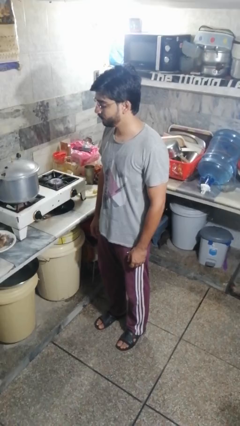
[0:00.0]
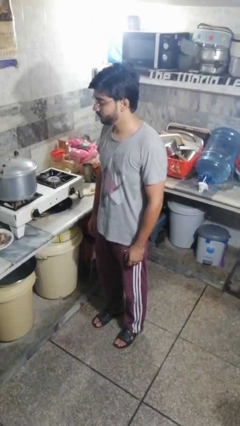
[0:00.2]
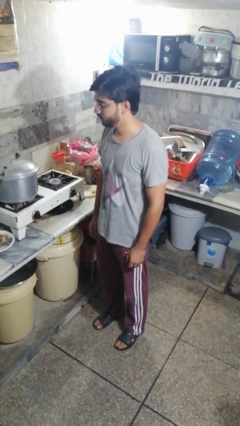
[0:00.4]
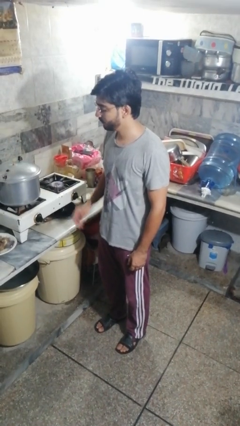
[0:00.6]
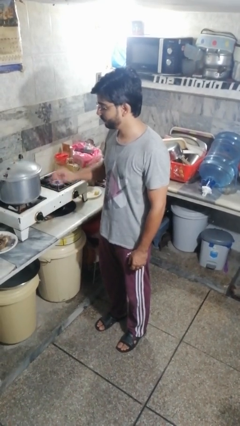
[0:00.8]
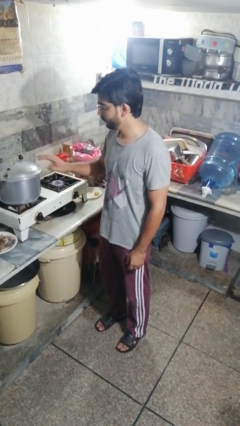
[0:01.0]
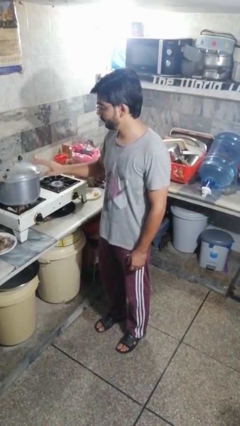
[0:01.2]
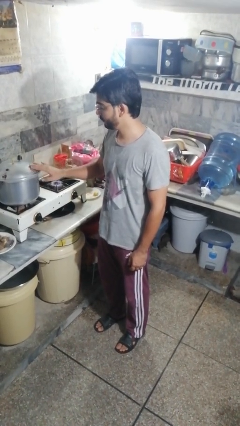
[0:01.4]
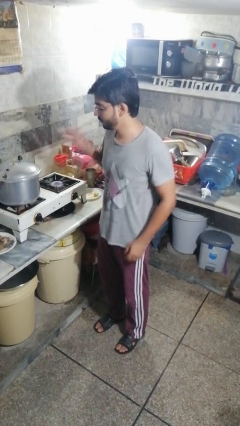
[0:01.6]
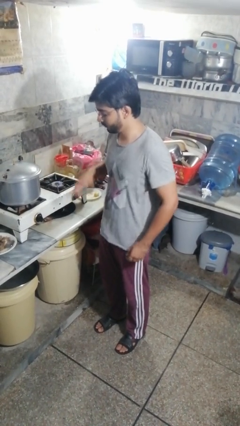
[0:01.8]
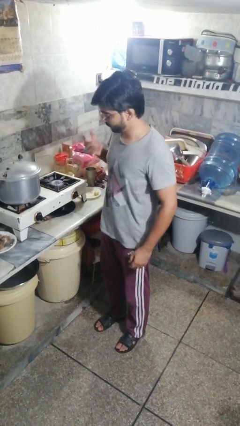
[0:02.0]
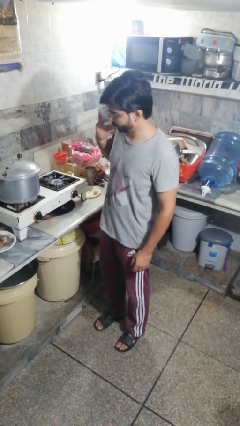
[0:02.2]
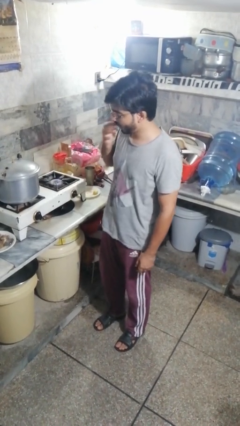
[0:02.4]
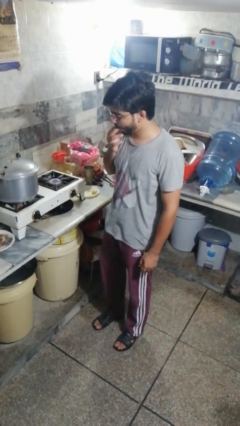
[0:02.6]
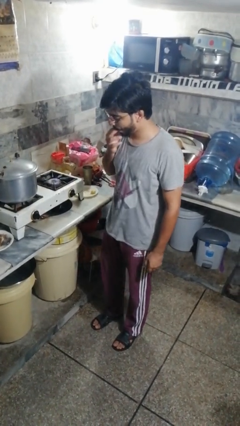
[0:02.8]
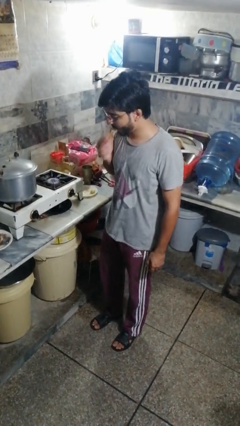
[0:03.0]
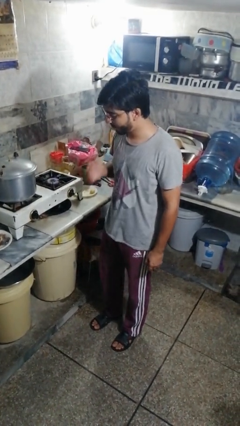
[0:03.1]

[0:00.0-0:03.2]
person burns hand

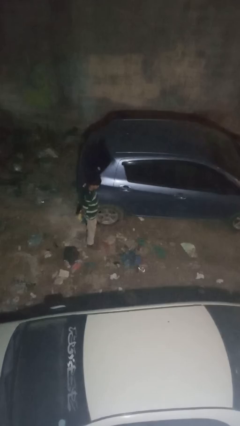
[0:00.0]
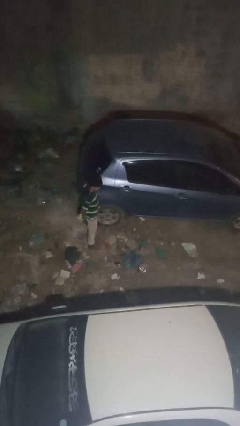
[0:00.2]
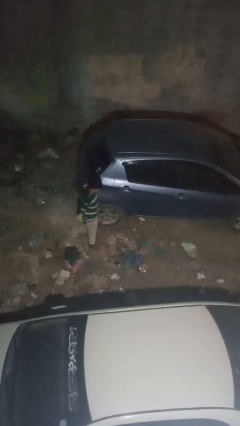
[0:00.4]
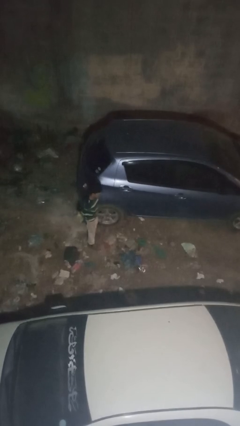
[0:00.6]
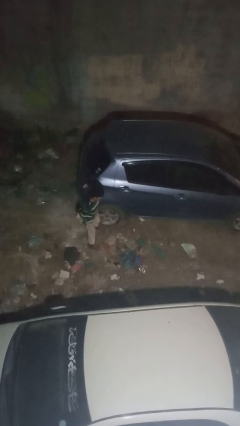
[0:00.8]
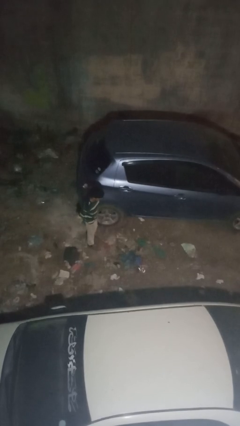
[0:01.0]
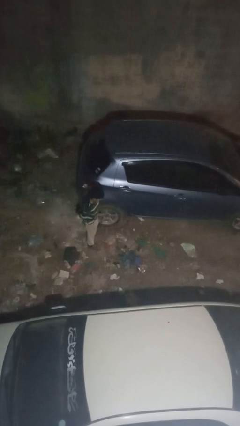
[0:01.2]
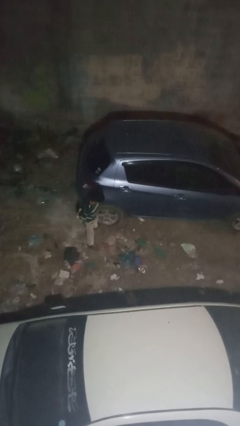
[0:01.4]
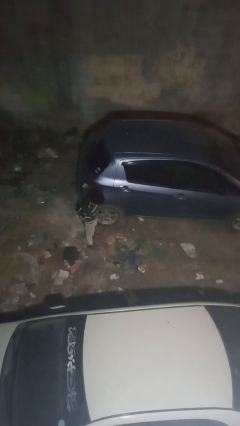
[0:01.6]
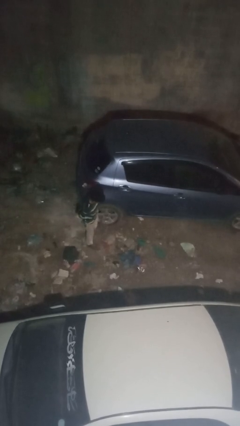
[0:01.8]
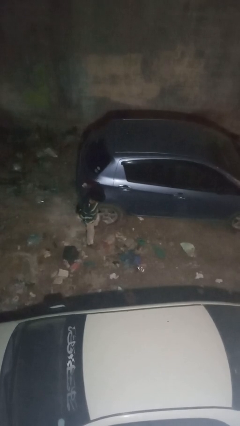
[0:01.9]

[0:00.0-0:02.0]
person kicks car tires

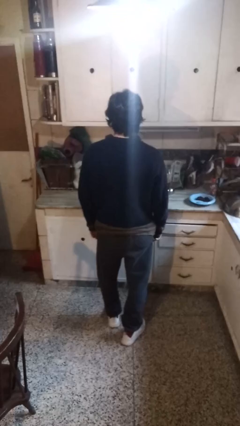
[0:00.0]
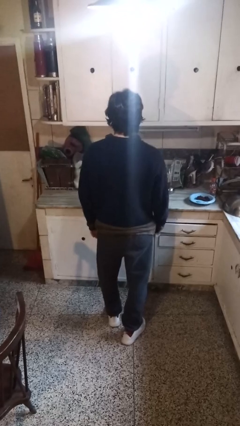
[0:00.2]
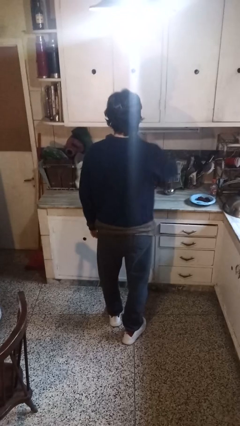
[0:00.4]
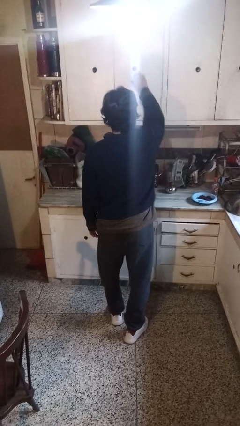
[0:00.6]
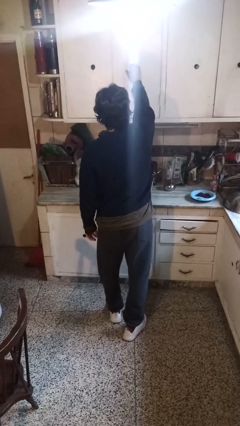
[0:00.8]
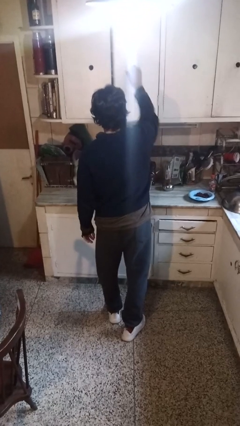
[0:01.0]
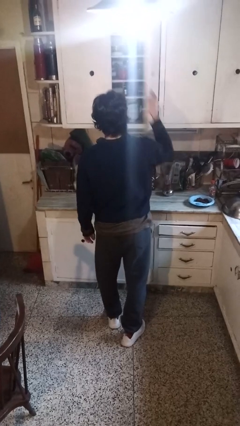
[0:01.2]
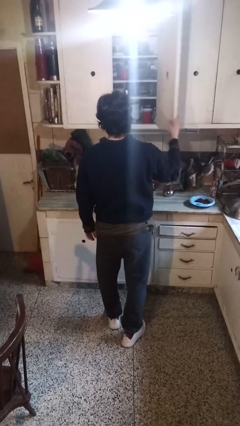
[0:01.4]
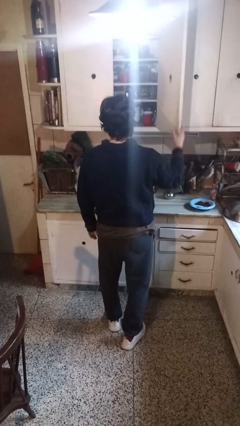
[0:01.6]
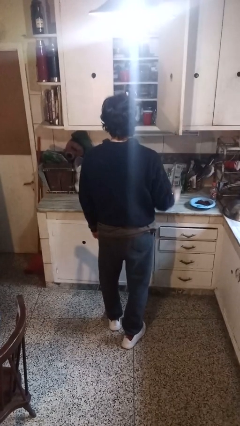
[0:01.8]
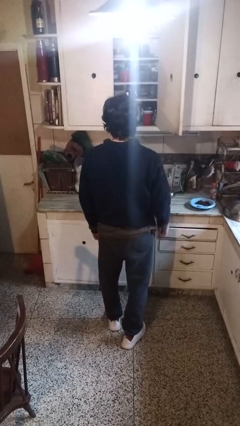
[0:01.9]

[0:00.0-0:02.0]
person opens cabinet

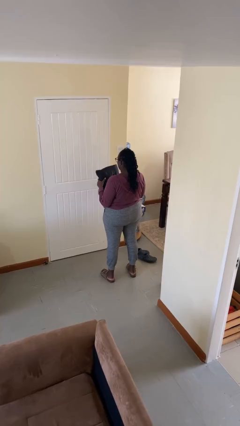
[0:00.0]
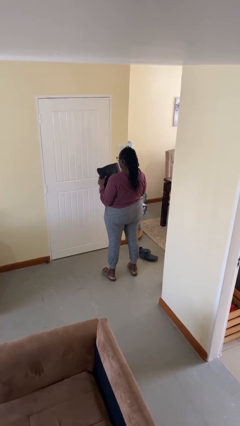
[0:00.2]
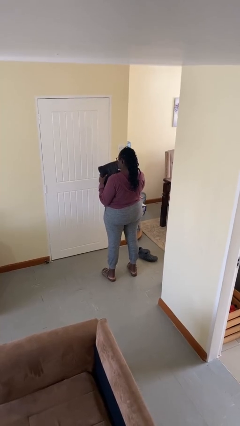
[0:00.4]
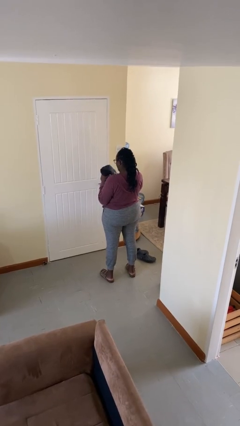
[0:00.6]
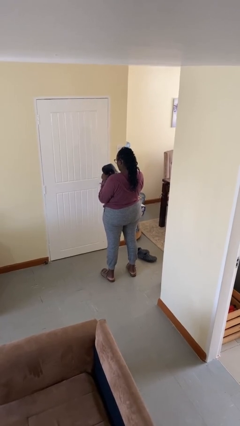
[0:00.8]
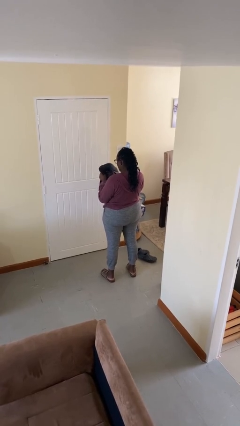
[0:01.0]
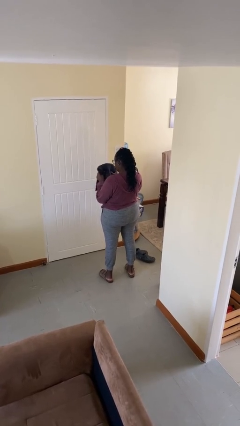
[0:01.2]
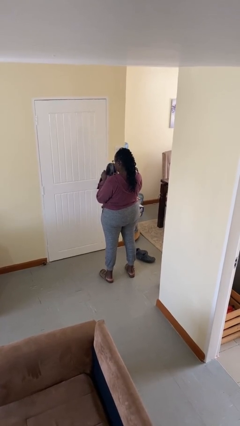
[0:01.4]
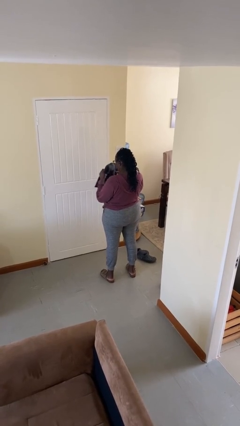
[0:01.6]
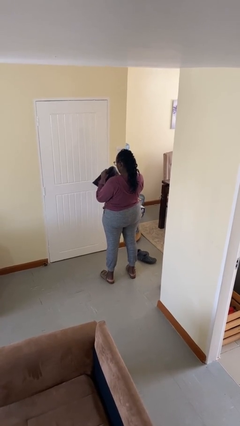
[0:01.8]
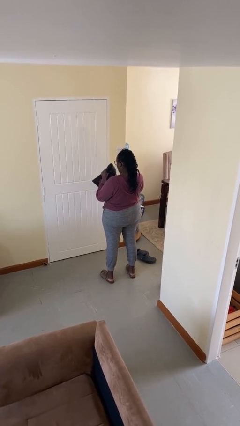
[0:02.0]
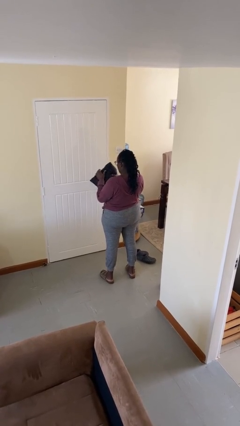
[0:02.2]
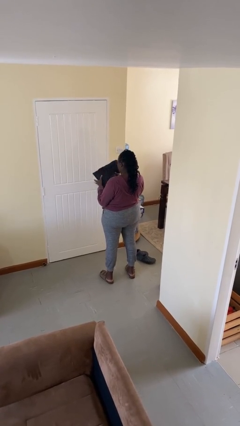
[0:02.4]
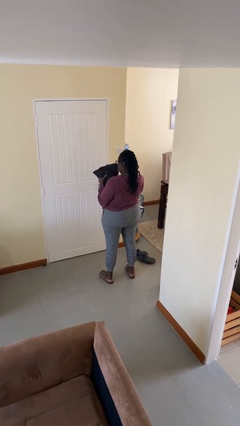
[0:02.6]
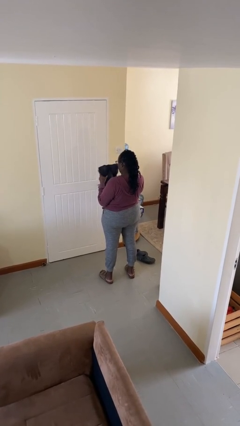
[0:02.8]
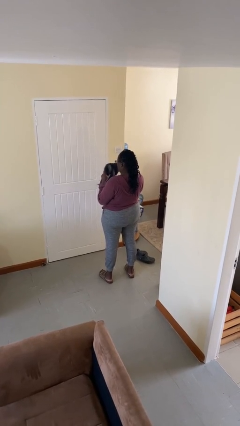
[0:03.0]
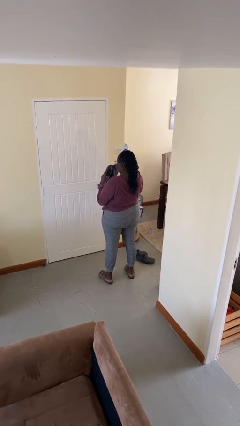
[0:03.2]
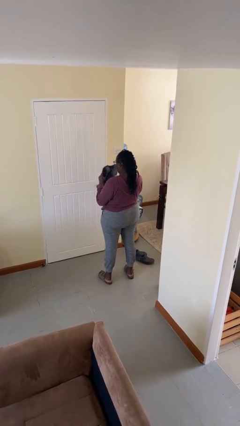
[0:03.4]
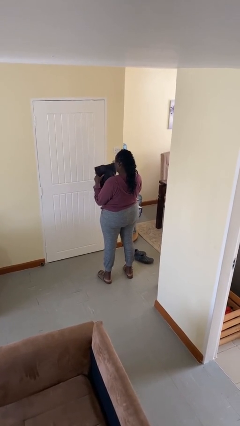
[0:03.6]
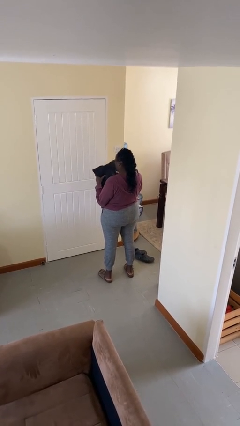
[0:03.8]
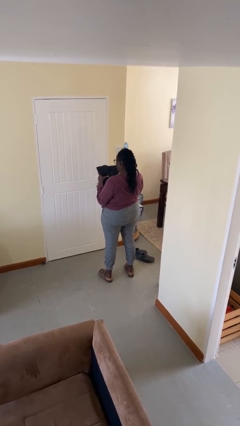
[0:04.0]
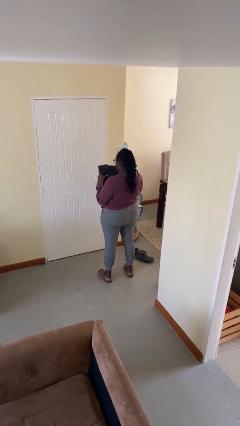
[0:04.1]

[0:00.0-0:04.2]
person squeezes object

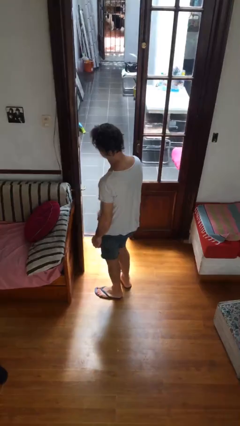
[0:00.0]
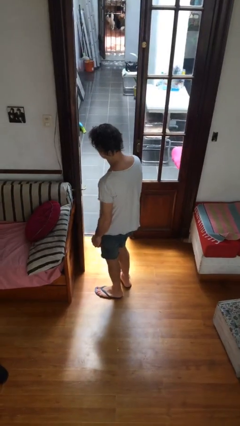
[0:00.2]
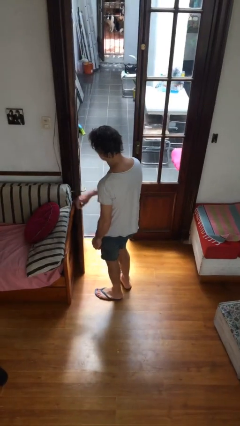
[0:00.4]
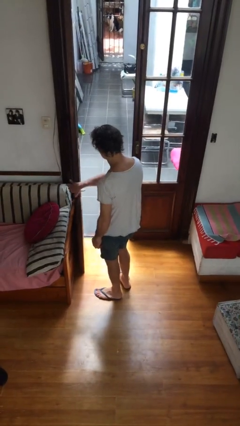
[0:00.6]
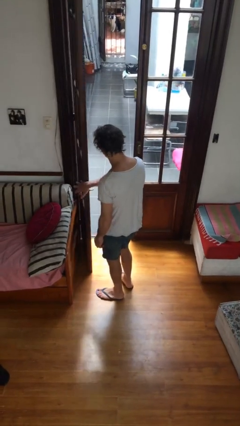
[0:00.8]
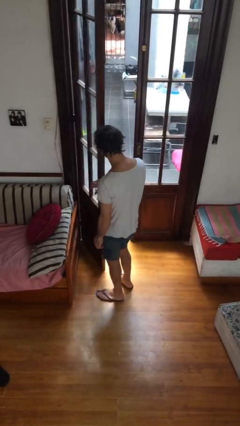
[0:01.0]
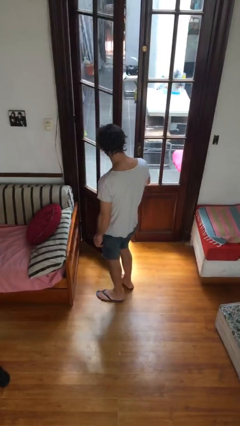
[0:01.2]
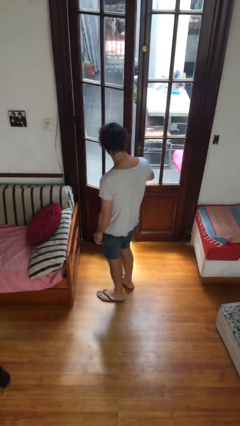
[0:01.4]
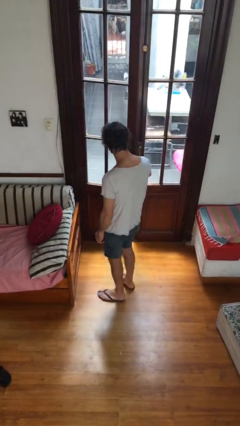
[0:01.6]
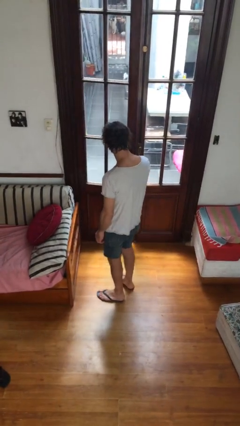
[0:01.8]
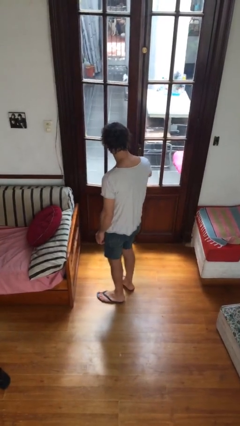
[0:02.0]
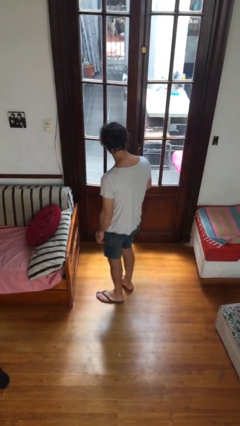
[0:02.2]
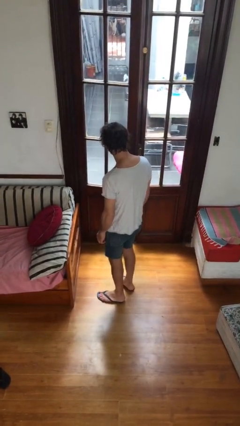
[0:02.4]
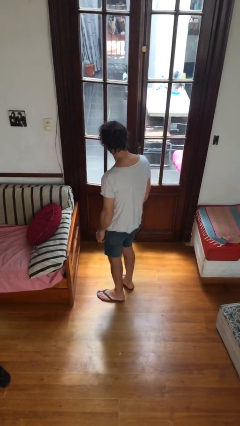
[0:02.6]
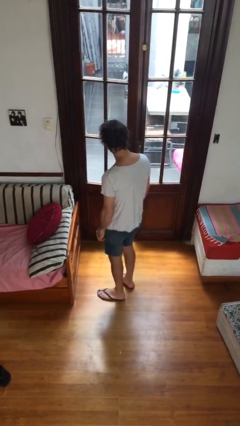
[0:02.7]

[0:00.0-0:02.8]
person closes facility door

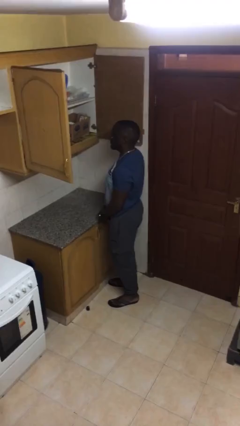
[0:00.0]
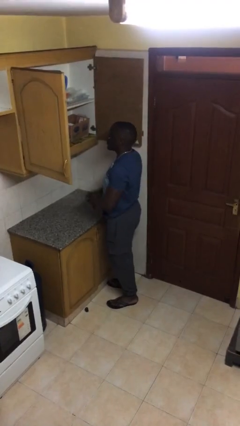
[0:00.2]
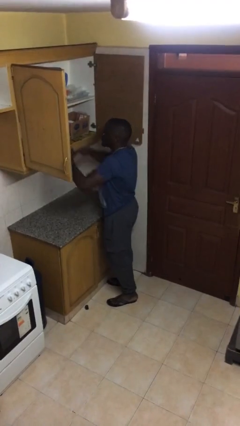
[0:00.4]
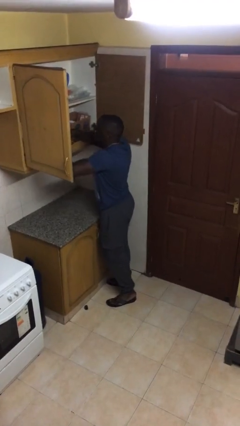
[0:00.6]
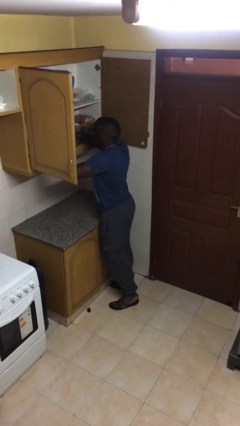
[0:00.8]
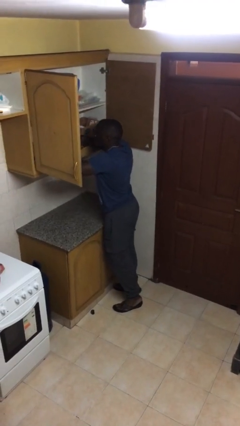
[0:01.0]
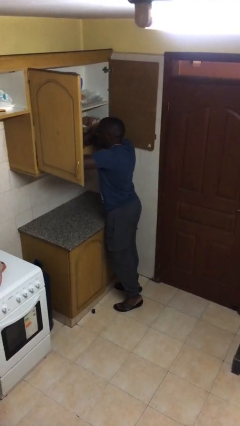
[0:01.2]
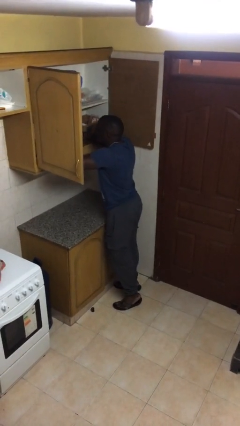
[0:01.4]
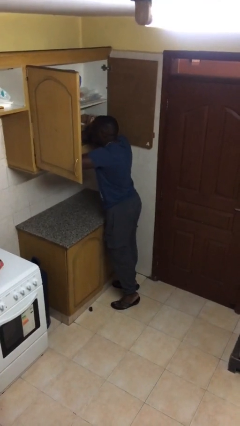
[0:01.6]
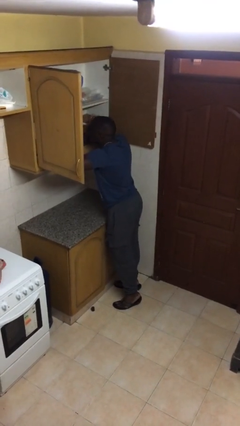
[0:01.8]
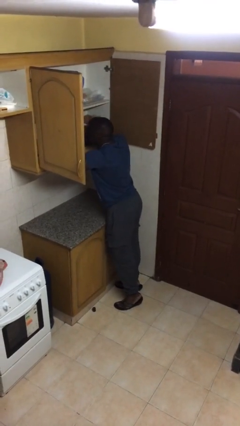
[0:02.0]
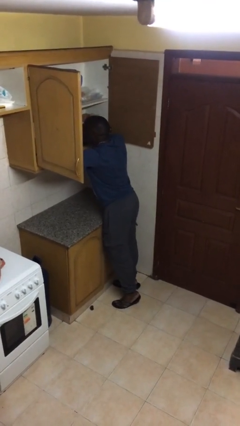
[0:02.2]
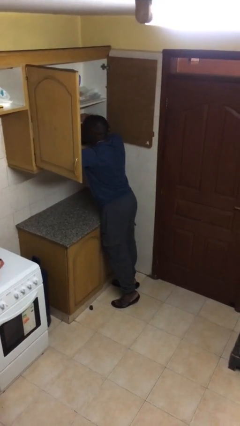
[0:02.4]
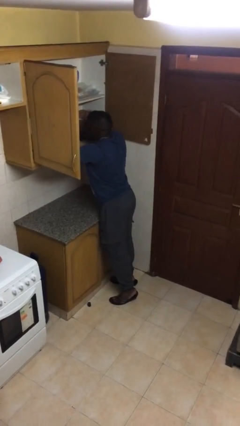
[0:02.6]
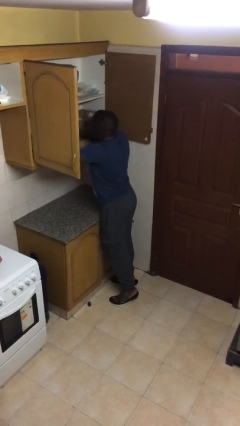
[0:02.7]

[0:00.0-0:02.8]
person searches in cabinet

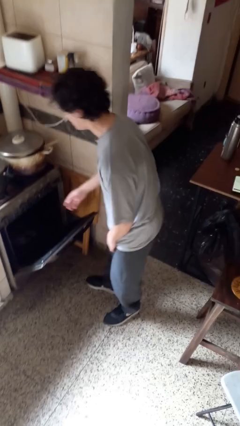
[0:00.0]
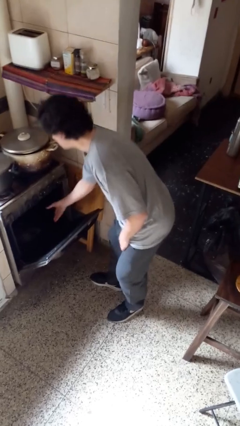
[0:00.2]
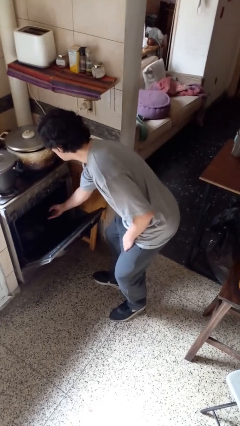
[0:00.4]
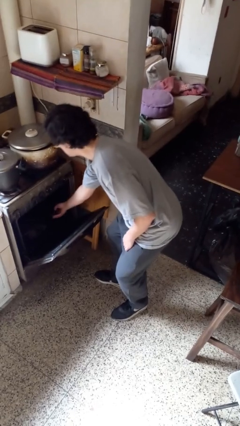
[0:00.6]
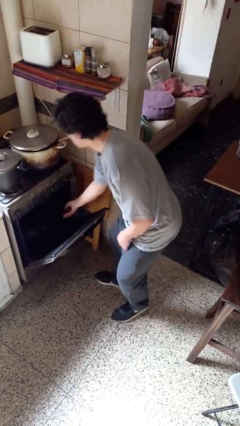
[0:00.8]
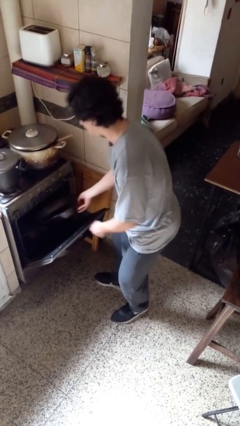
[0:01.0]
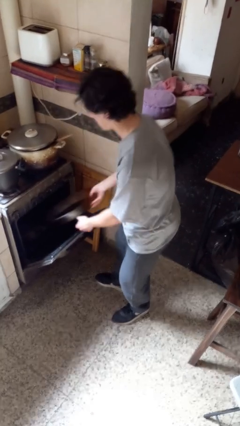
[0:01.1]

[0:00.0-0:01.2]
person takes object from oven
